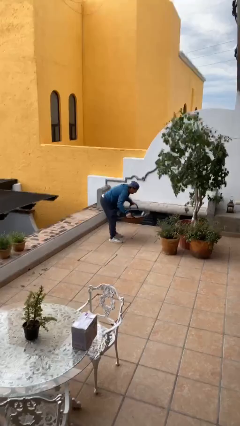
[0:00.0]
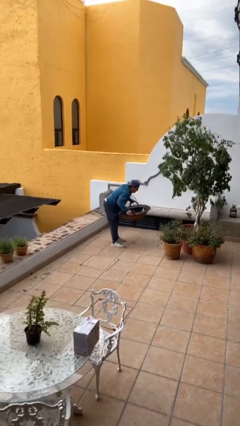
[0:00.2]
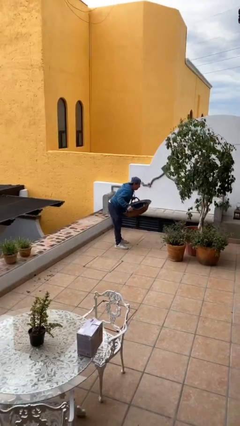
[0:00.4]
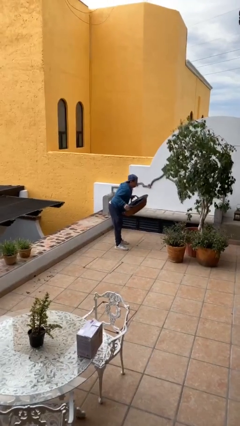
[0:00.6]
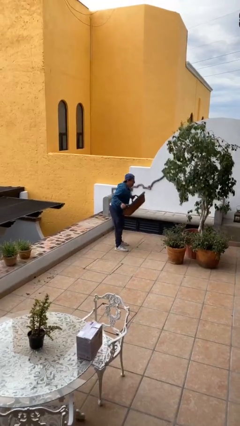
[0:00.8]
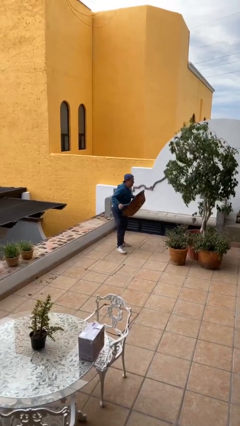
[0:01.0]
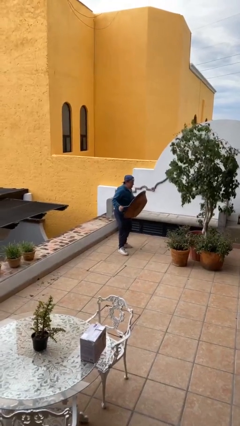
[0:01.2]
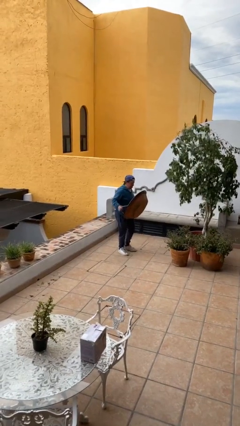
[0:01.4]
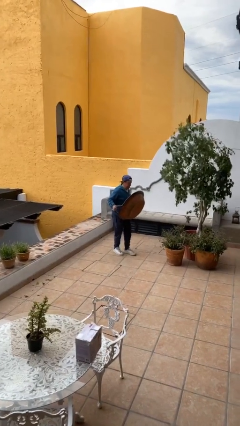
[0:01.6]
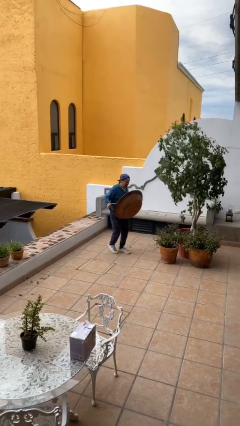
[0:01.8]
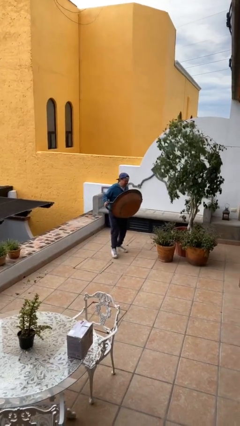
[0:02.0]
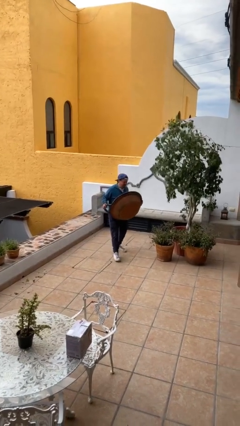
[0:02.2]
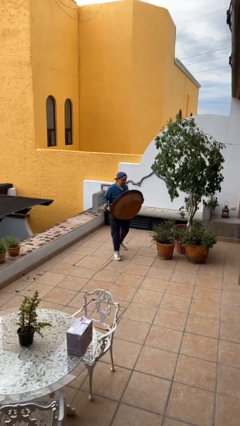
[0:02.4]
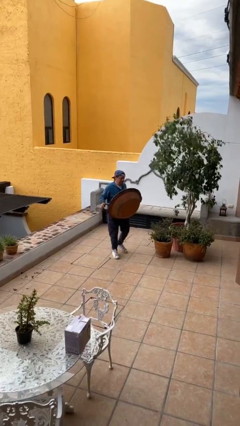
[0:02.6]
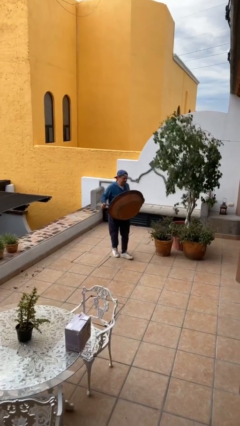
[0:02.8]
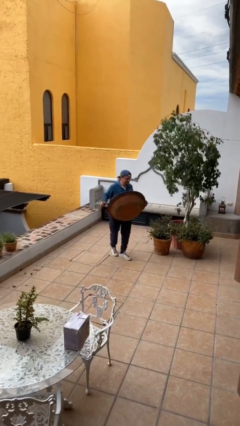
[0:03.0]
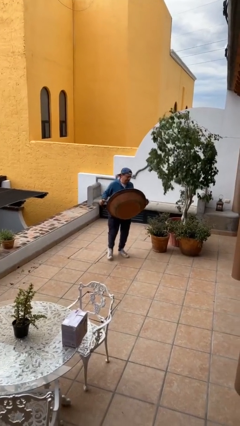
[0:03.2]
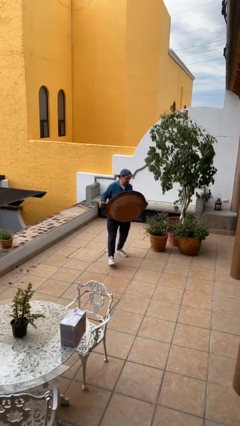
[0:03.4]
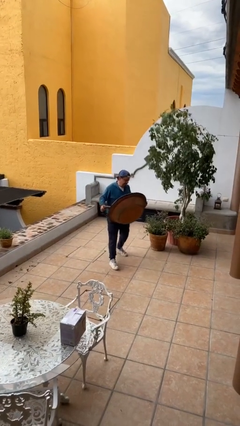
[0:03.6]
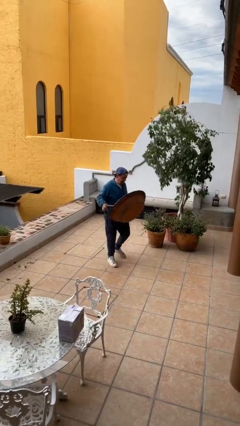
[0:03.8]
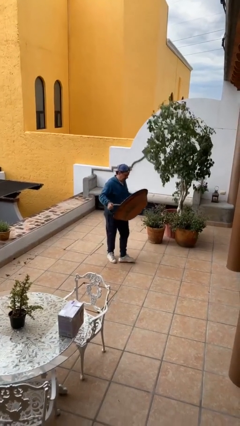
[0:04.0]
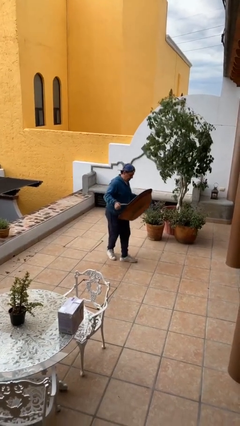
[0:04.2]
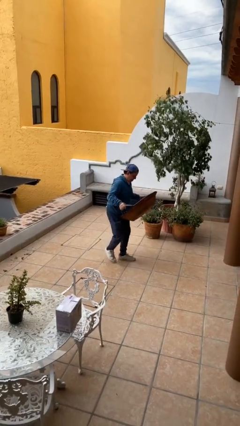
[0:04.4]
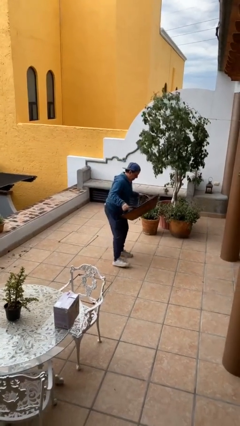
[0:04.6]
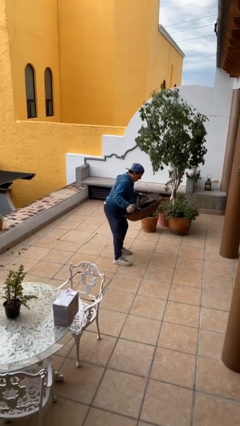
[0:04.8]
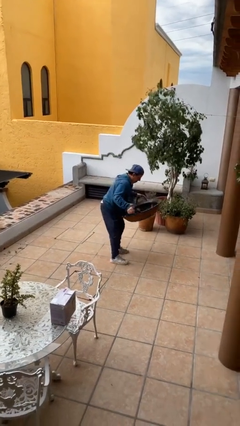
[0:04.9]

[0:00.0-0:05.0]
person carries heavy object

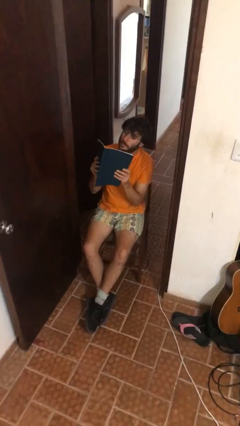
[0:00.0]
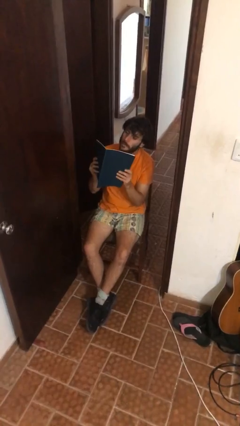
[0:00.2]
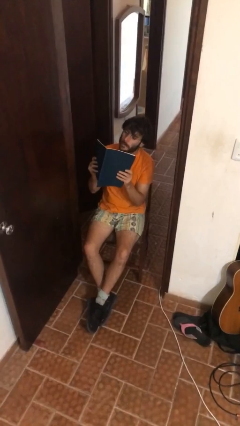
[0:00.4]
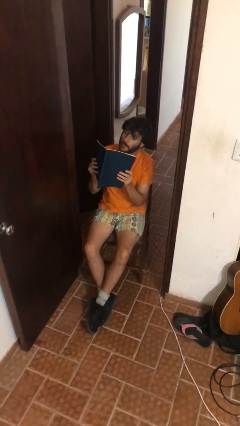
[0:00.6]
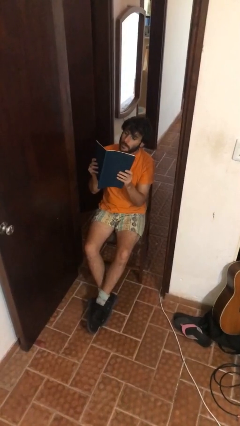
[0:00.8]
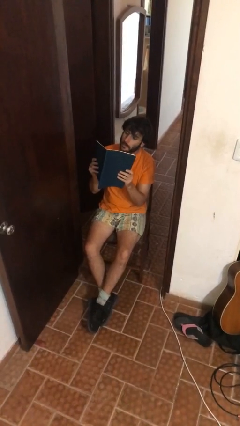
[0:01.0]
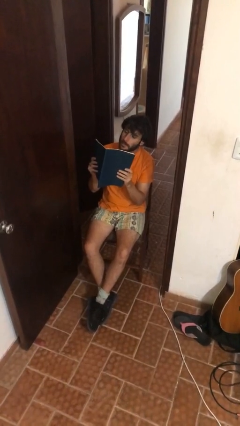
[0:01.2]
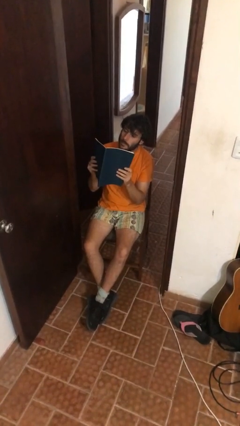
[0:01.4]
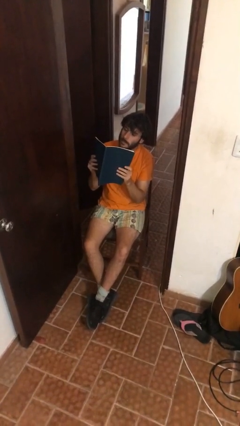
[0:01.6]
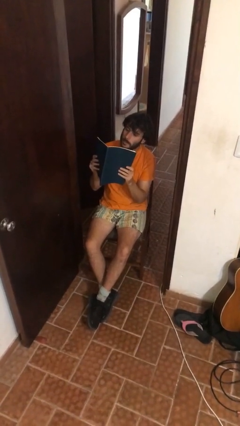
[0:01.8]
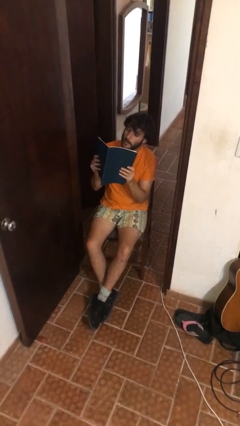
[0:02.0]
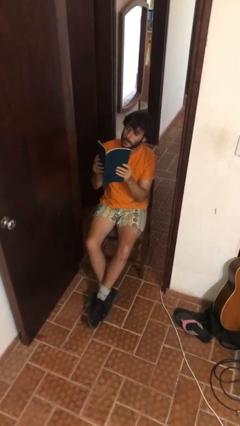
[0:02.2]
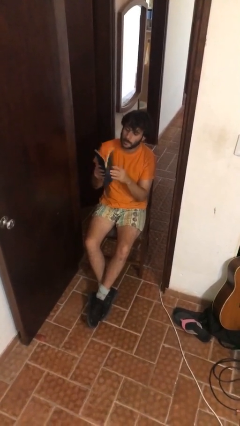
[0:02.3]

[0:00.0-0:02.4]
person reads document

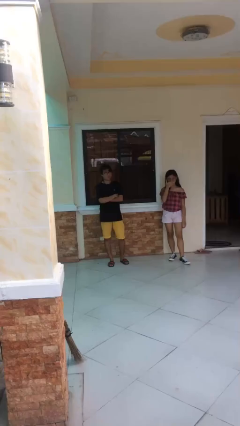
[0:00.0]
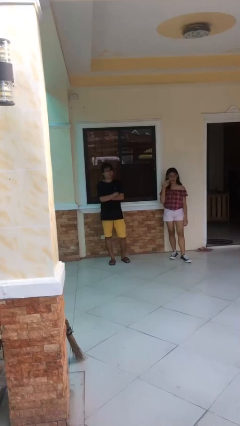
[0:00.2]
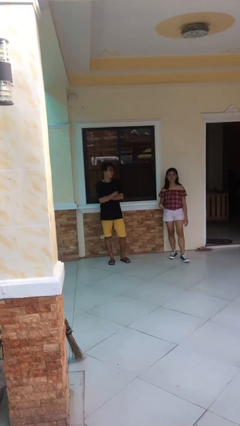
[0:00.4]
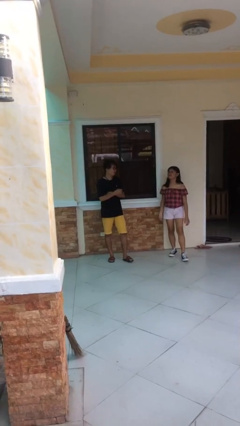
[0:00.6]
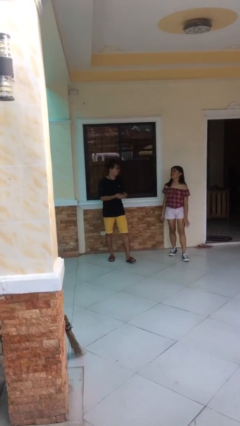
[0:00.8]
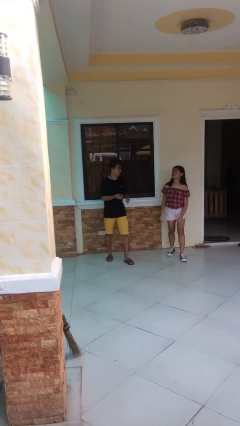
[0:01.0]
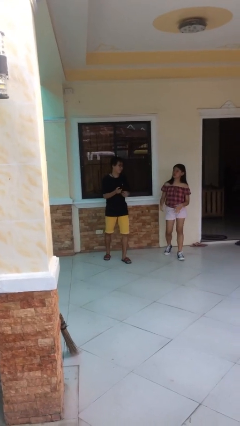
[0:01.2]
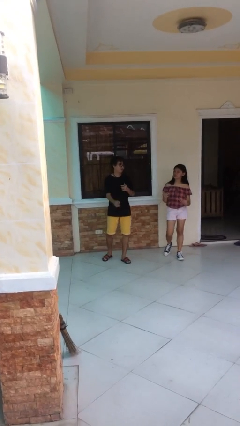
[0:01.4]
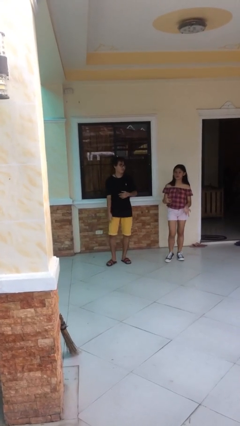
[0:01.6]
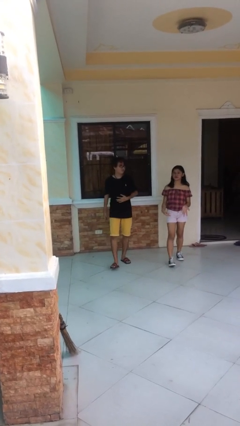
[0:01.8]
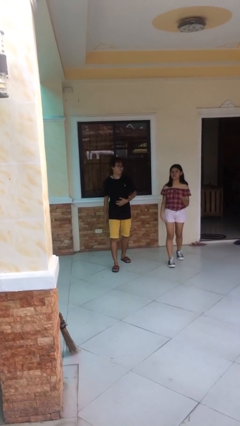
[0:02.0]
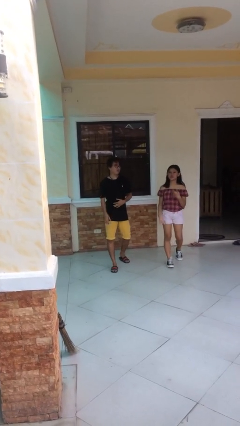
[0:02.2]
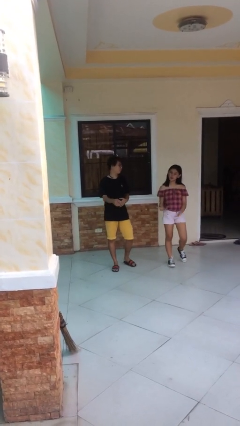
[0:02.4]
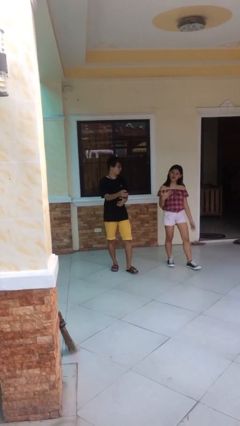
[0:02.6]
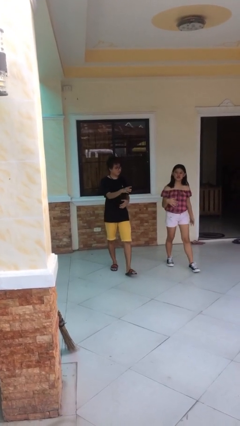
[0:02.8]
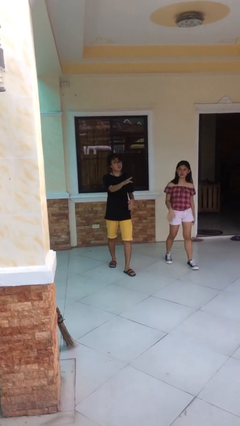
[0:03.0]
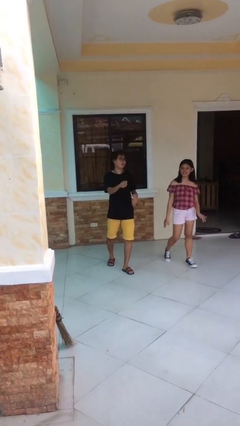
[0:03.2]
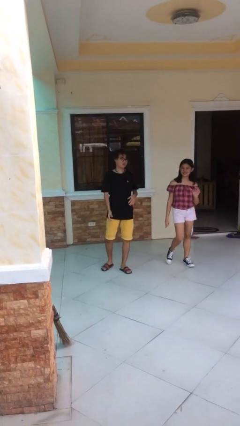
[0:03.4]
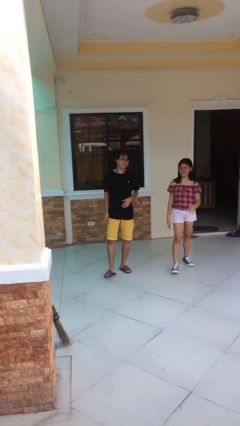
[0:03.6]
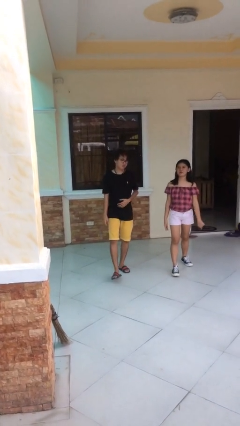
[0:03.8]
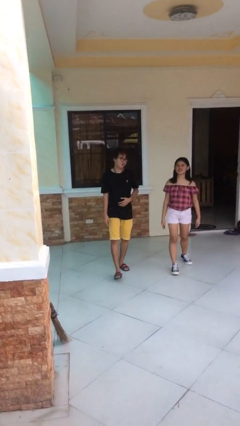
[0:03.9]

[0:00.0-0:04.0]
person talks to person

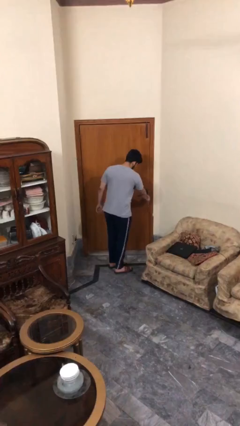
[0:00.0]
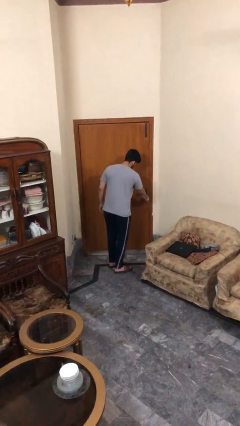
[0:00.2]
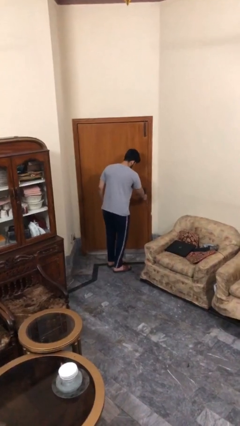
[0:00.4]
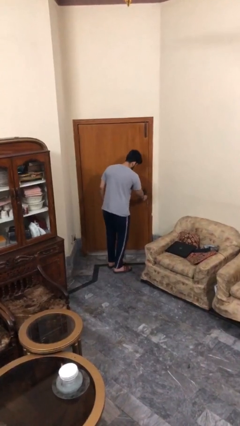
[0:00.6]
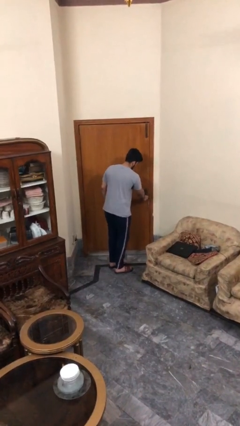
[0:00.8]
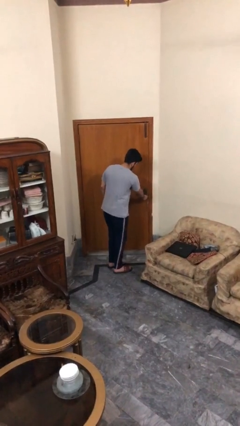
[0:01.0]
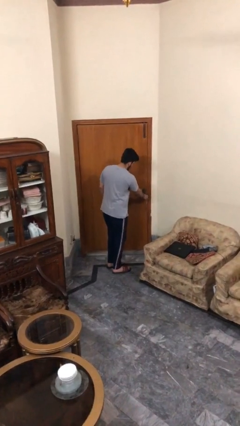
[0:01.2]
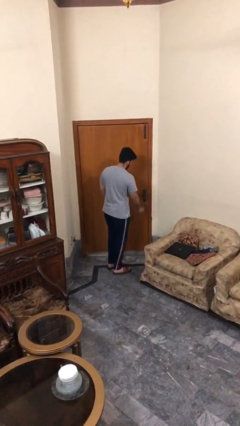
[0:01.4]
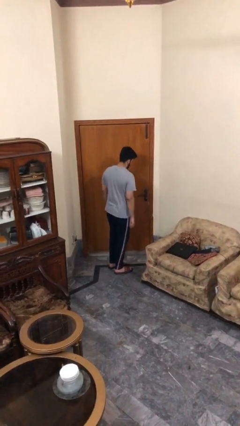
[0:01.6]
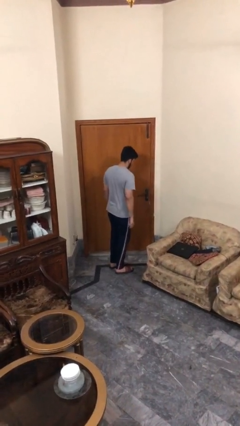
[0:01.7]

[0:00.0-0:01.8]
person locks door with keys

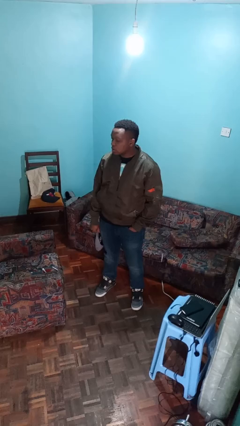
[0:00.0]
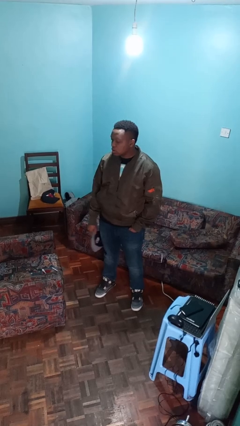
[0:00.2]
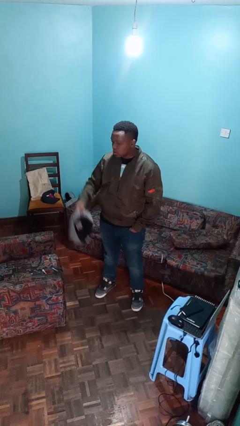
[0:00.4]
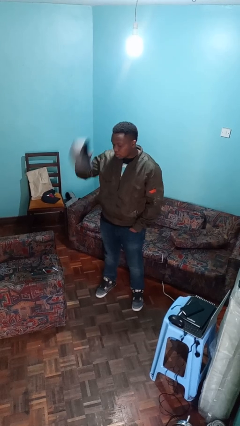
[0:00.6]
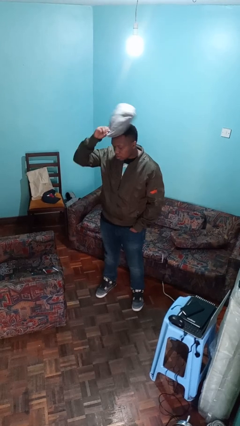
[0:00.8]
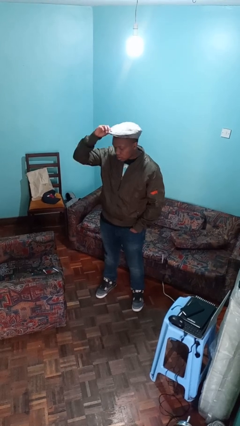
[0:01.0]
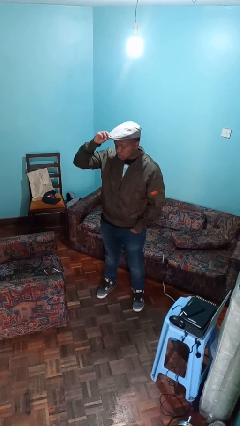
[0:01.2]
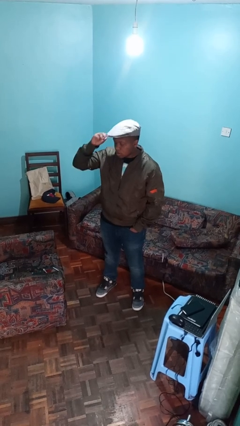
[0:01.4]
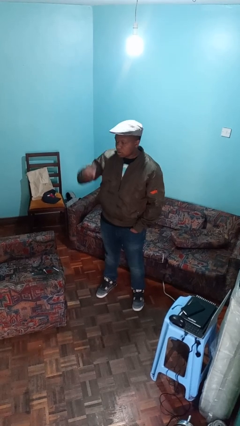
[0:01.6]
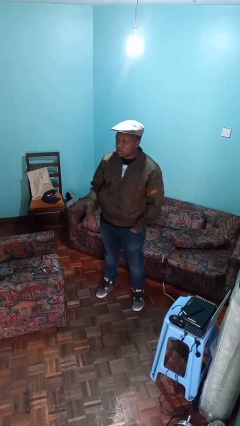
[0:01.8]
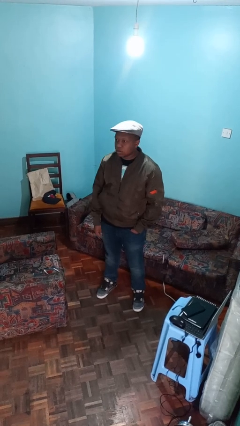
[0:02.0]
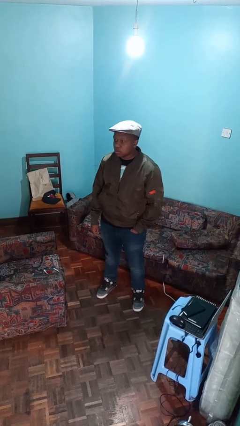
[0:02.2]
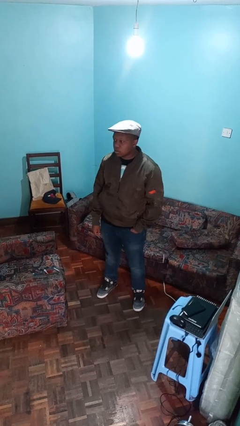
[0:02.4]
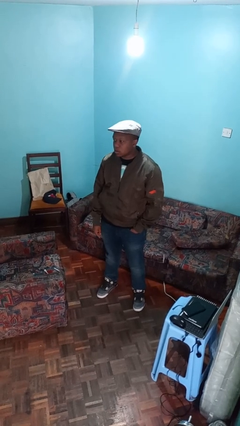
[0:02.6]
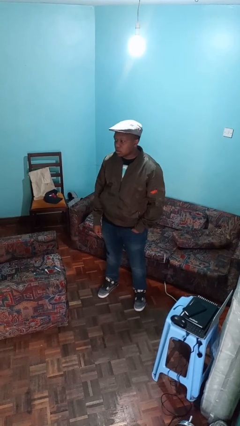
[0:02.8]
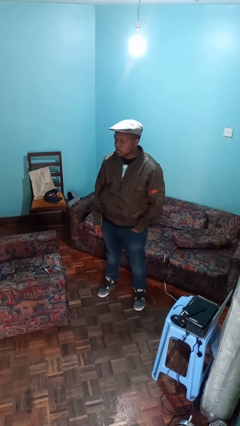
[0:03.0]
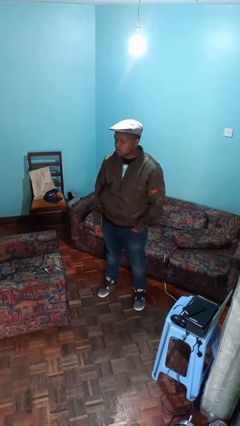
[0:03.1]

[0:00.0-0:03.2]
person puts on hat

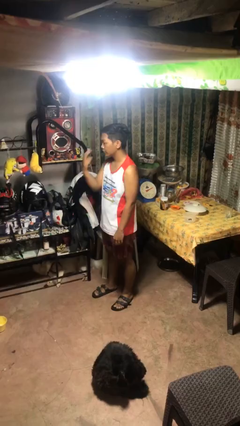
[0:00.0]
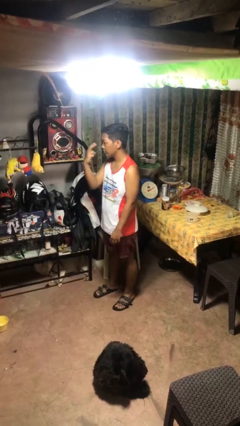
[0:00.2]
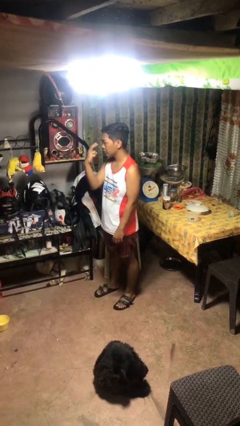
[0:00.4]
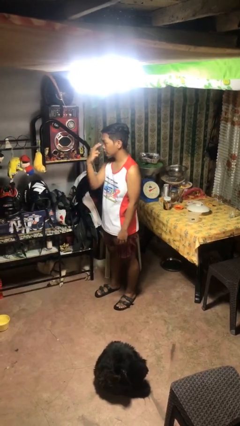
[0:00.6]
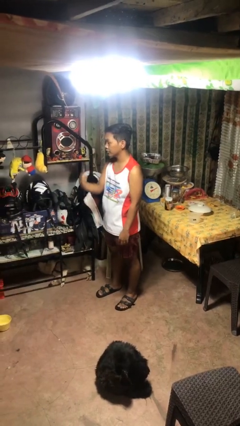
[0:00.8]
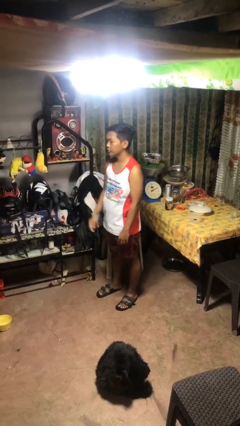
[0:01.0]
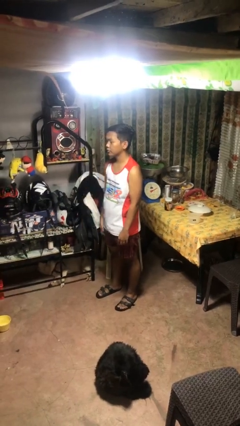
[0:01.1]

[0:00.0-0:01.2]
person gestures watch closely
